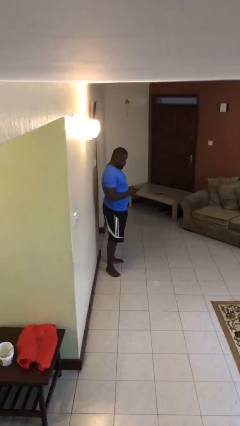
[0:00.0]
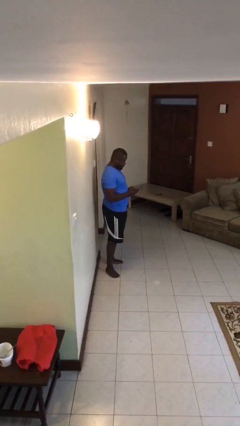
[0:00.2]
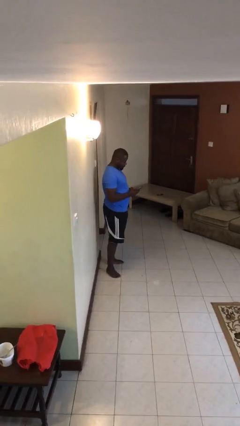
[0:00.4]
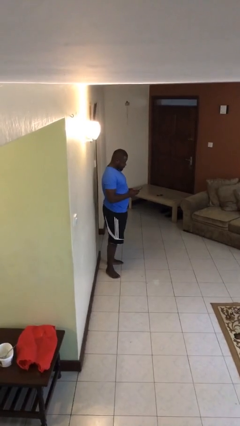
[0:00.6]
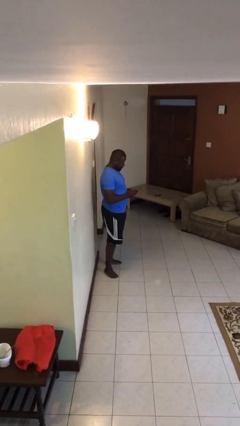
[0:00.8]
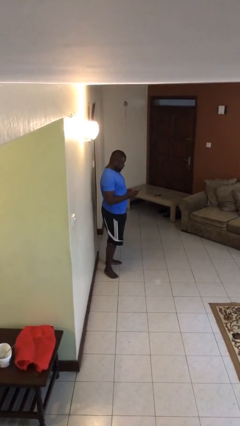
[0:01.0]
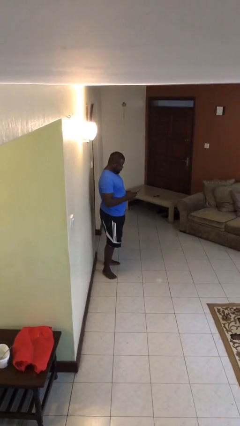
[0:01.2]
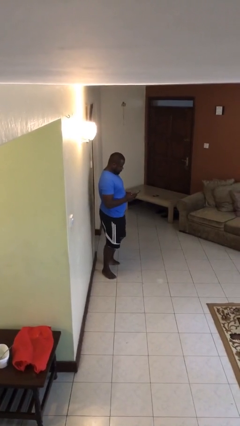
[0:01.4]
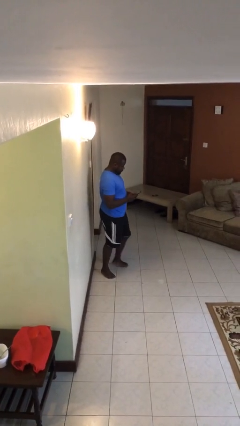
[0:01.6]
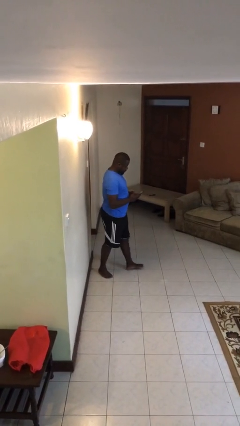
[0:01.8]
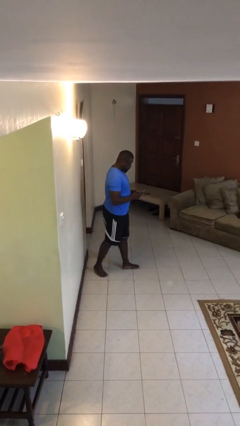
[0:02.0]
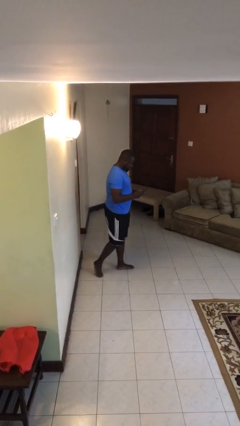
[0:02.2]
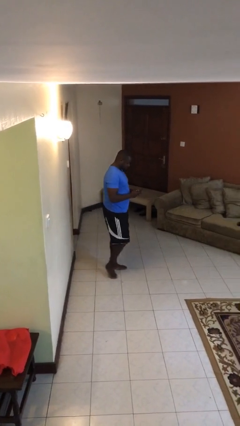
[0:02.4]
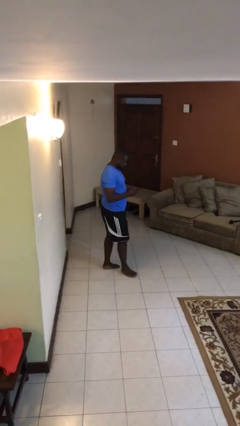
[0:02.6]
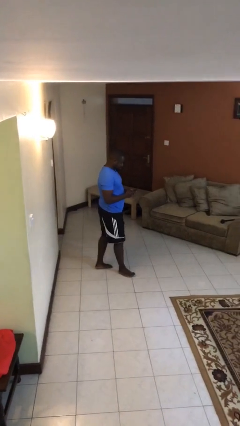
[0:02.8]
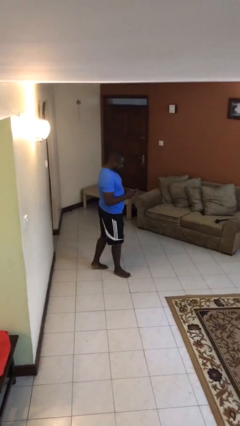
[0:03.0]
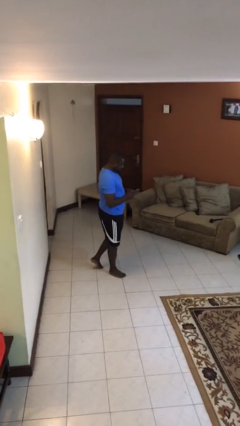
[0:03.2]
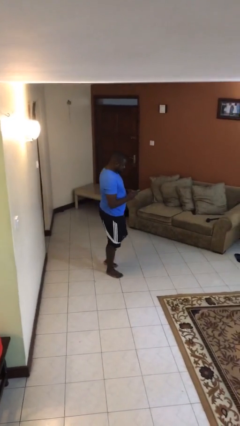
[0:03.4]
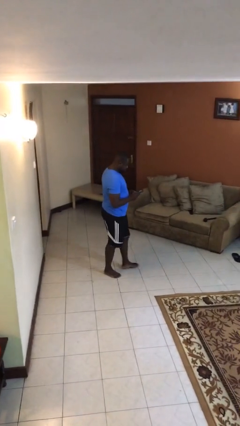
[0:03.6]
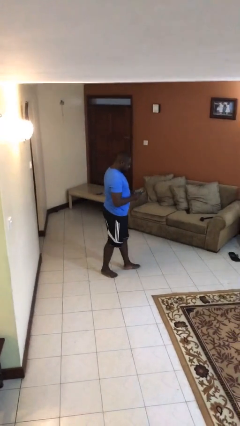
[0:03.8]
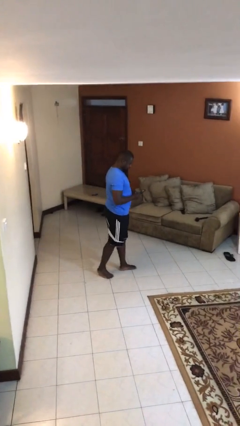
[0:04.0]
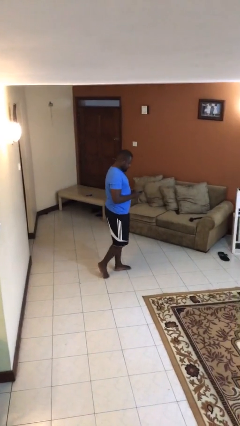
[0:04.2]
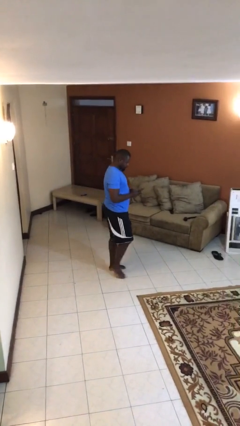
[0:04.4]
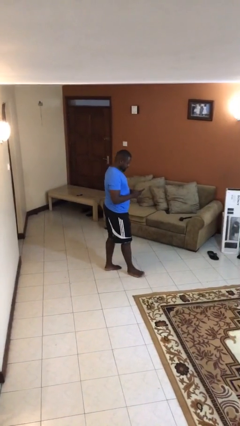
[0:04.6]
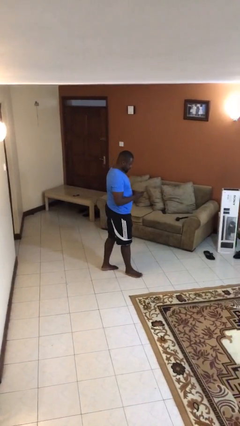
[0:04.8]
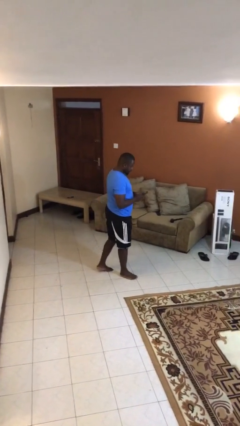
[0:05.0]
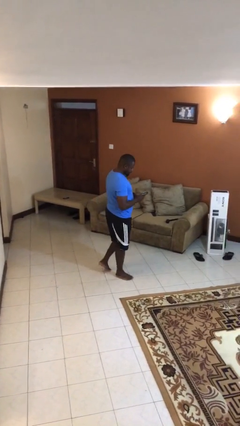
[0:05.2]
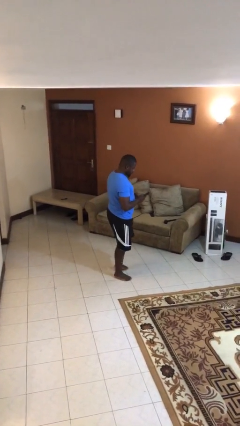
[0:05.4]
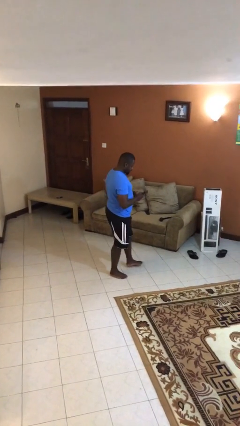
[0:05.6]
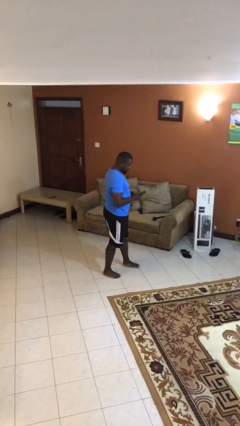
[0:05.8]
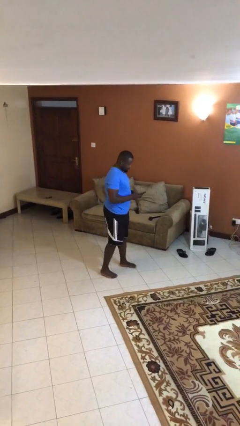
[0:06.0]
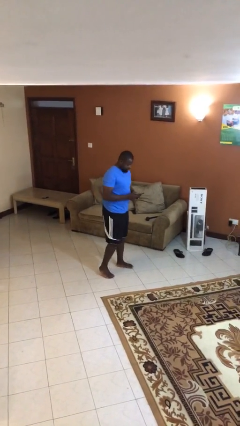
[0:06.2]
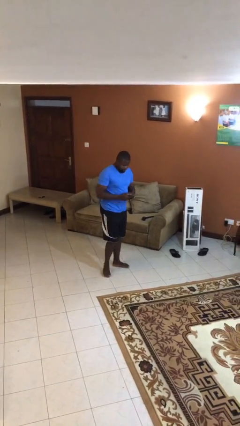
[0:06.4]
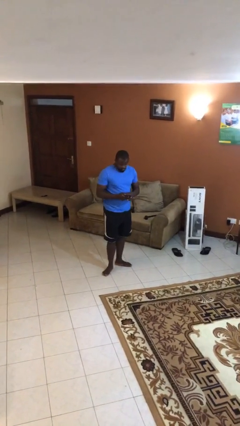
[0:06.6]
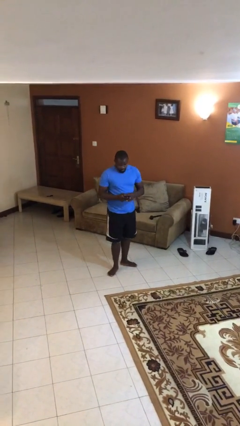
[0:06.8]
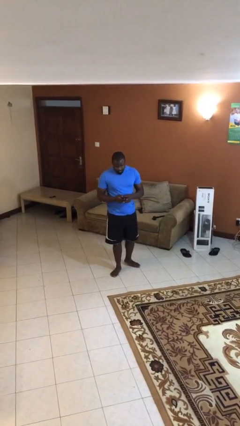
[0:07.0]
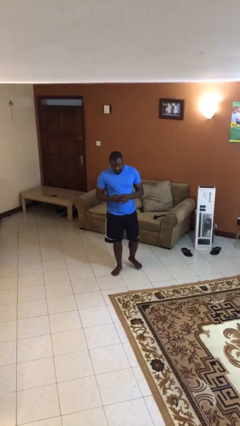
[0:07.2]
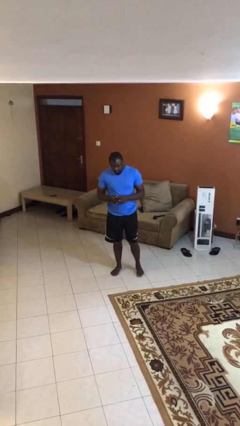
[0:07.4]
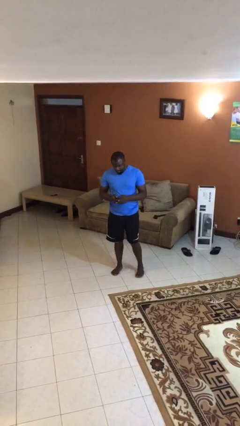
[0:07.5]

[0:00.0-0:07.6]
person texts on phone

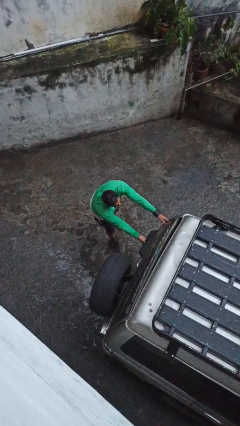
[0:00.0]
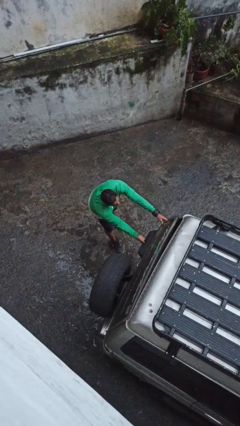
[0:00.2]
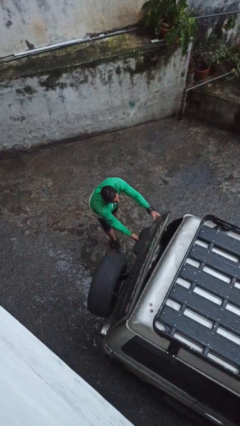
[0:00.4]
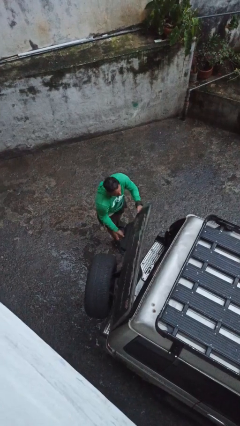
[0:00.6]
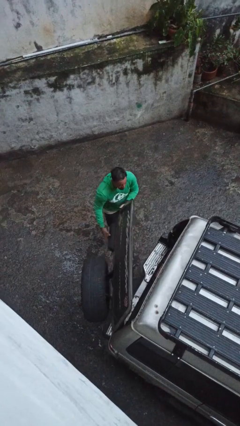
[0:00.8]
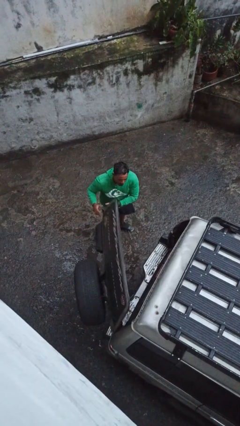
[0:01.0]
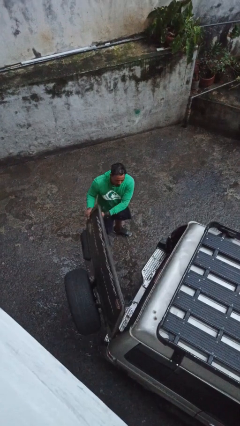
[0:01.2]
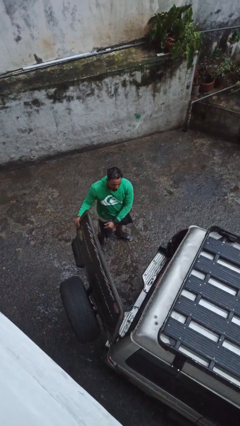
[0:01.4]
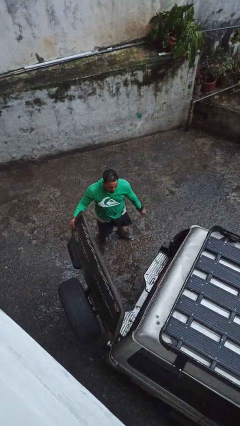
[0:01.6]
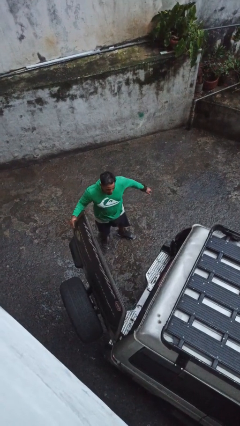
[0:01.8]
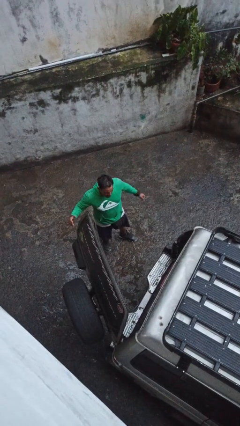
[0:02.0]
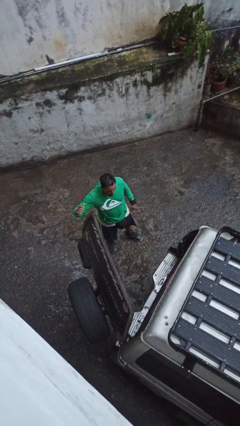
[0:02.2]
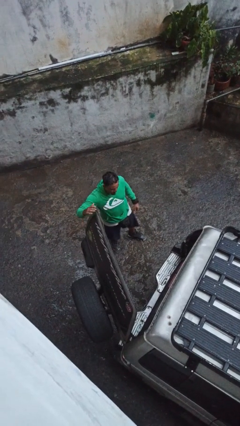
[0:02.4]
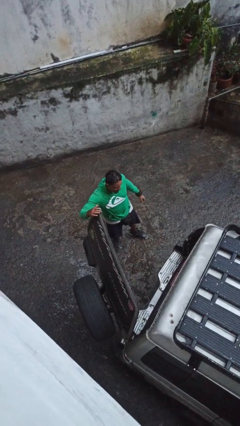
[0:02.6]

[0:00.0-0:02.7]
person opens car trunk

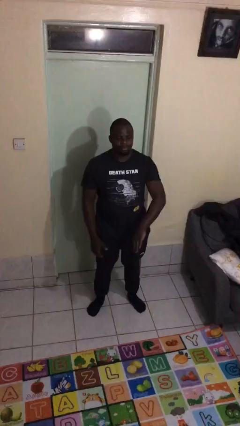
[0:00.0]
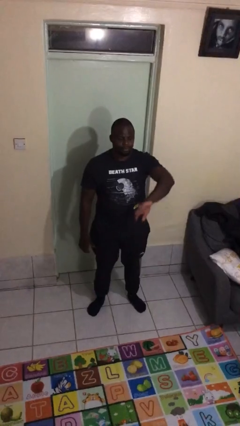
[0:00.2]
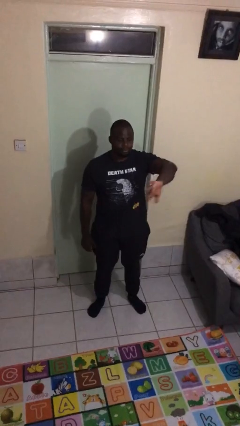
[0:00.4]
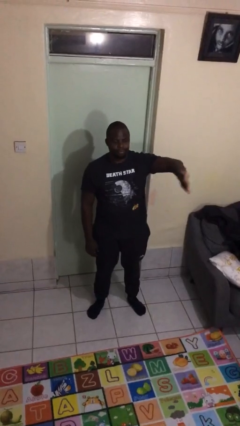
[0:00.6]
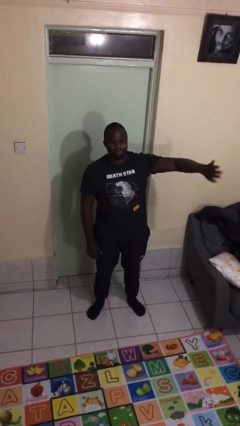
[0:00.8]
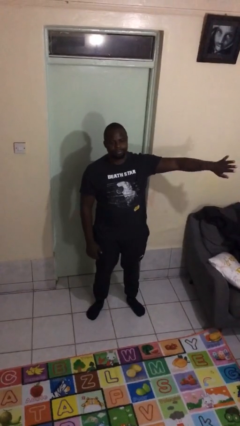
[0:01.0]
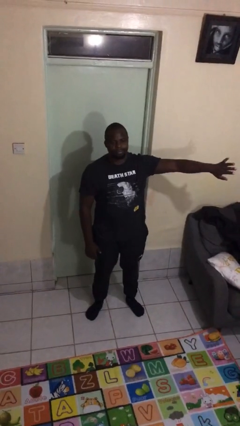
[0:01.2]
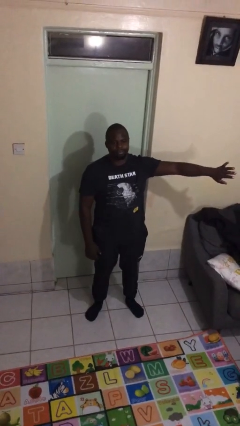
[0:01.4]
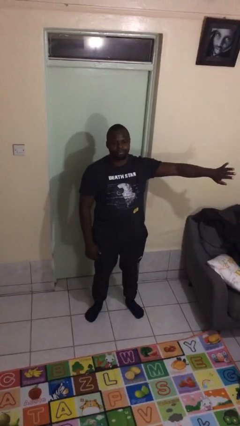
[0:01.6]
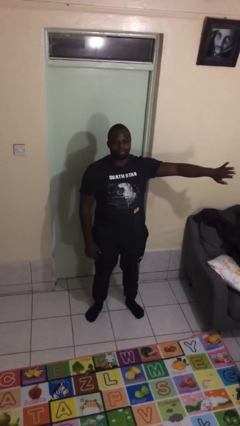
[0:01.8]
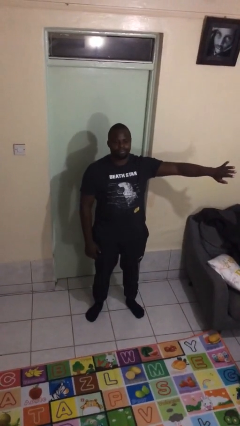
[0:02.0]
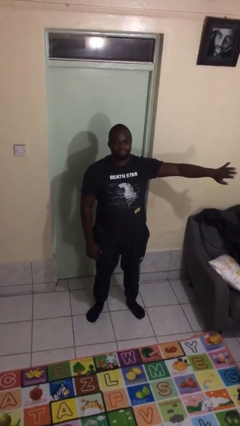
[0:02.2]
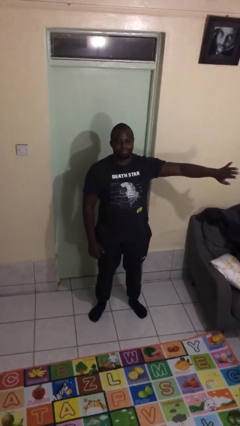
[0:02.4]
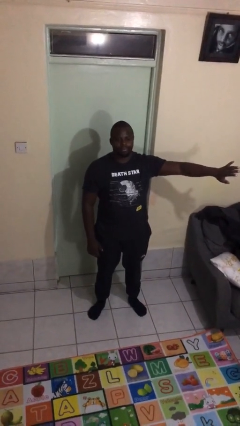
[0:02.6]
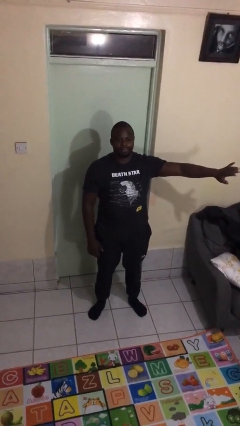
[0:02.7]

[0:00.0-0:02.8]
person gestures swipe left

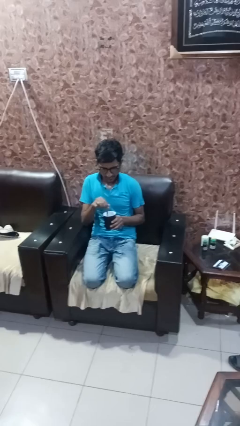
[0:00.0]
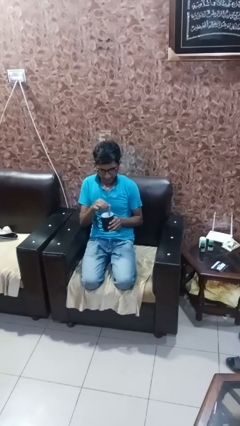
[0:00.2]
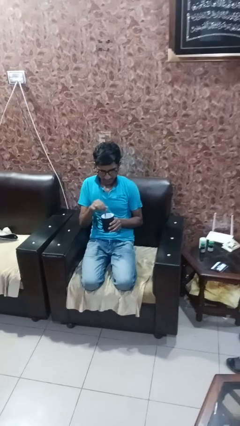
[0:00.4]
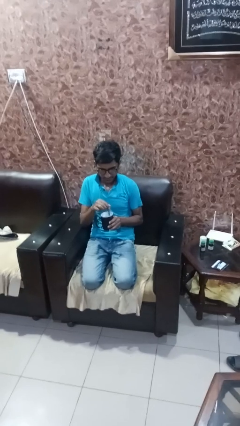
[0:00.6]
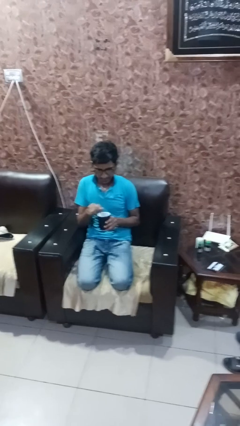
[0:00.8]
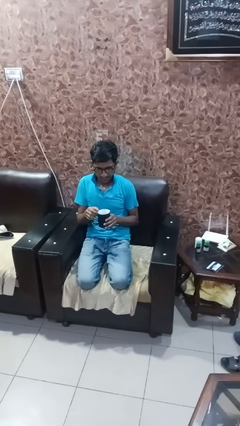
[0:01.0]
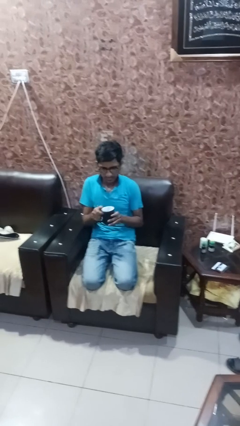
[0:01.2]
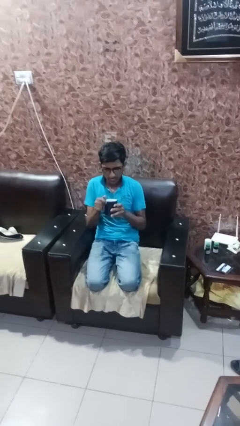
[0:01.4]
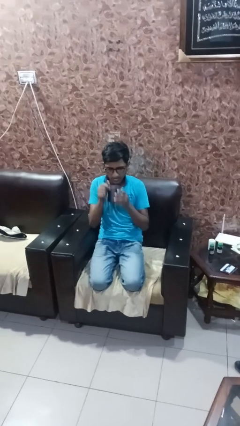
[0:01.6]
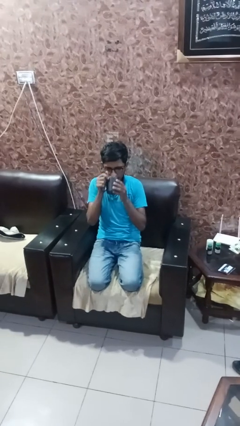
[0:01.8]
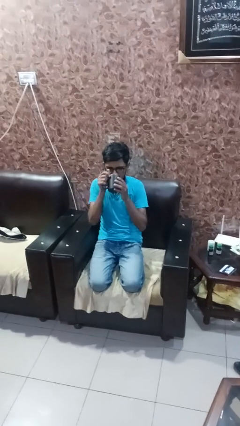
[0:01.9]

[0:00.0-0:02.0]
person stirs mug

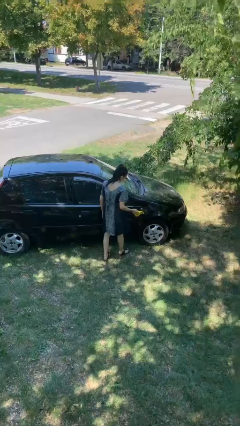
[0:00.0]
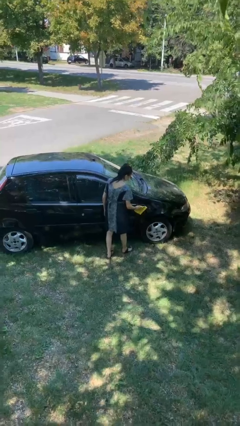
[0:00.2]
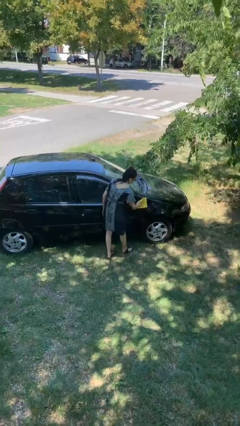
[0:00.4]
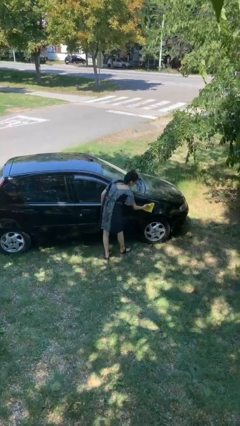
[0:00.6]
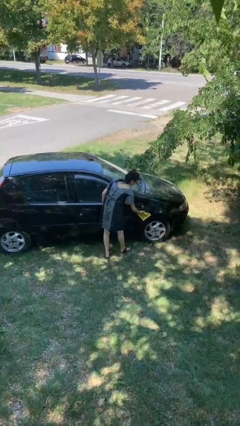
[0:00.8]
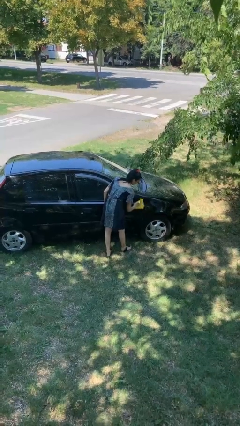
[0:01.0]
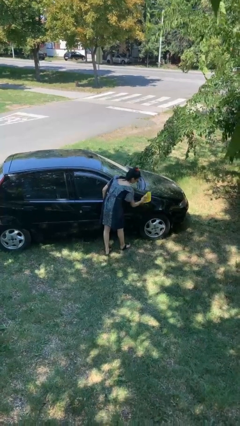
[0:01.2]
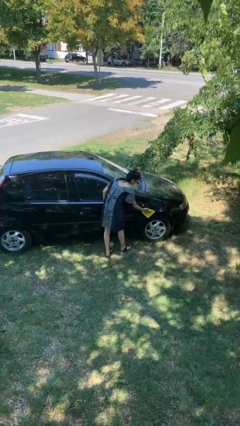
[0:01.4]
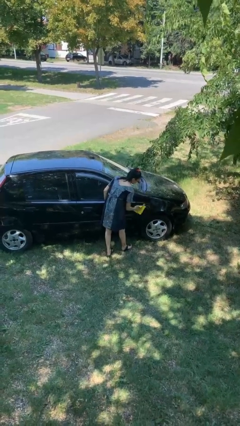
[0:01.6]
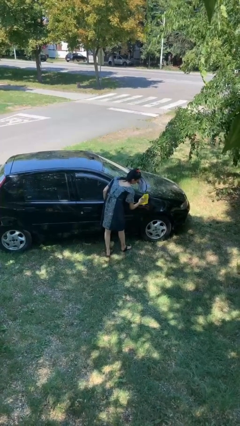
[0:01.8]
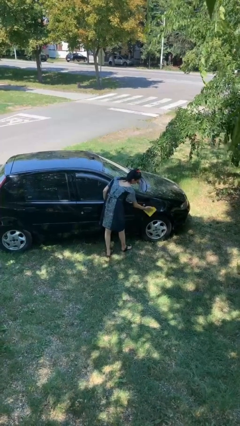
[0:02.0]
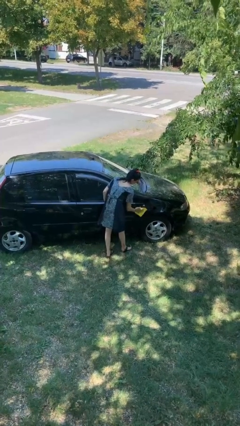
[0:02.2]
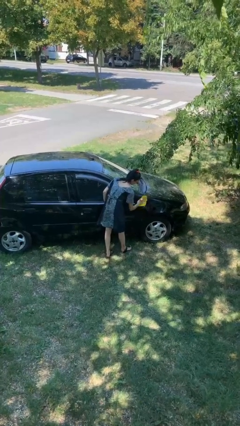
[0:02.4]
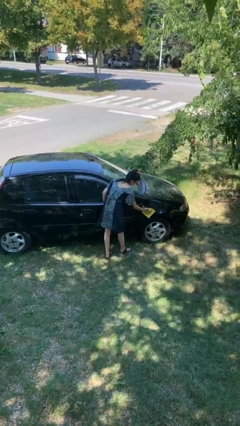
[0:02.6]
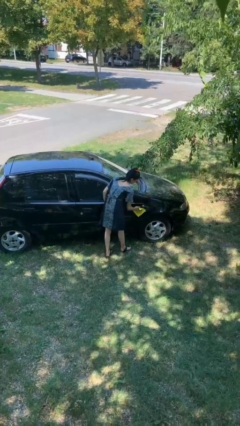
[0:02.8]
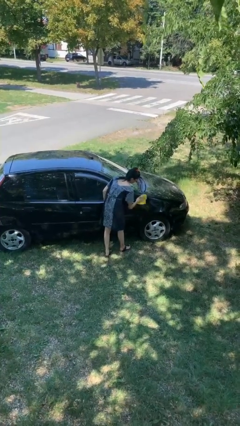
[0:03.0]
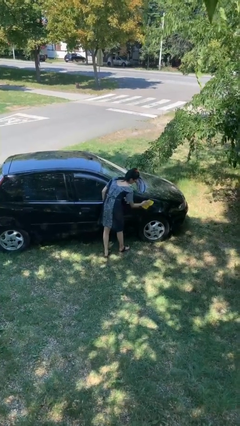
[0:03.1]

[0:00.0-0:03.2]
person polishes car with rag
